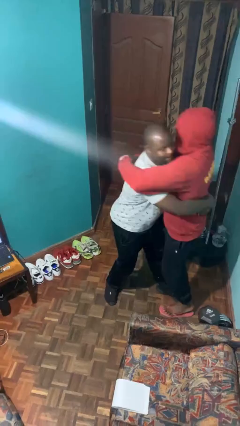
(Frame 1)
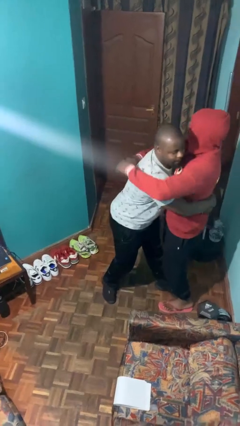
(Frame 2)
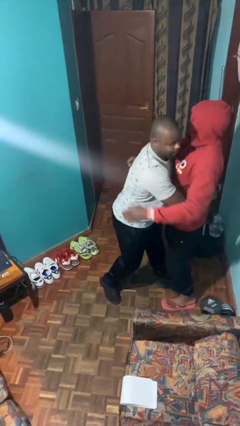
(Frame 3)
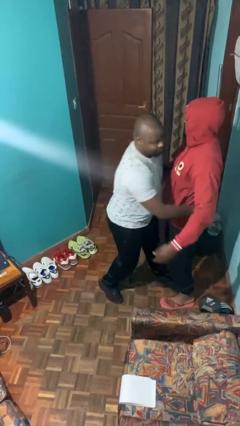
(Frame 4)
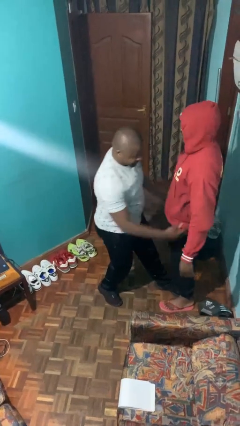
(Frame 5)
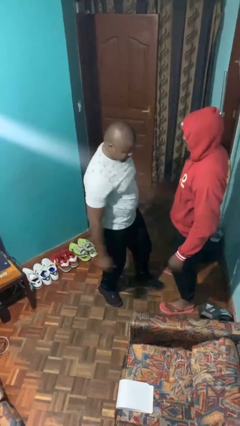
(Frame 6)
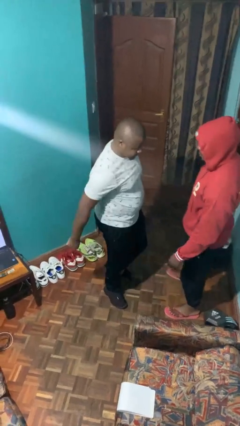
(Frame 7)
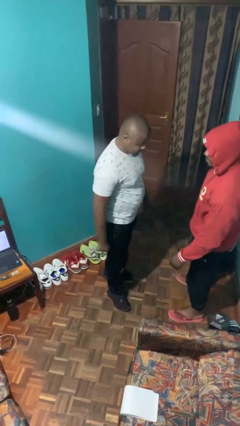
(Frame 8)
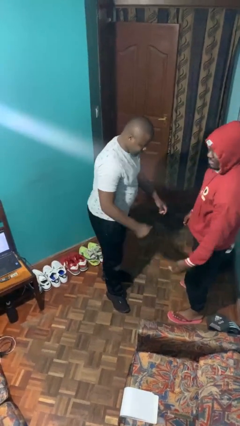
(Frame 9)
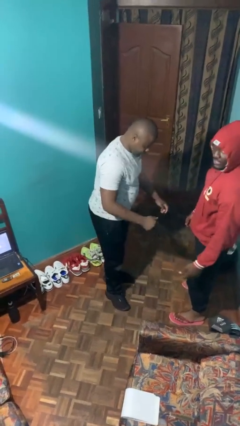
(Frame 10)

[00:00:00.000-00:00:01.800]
person puts down person

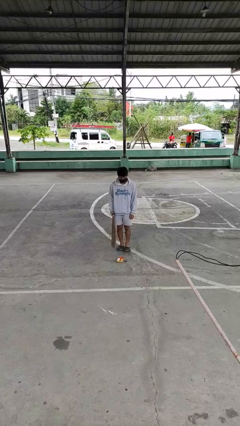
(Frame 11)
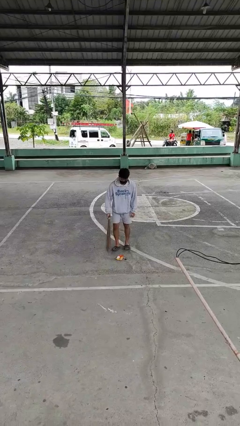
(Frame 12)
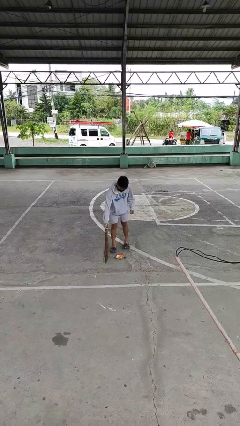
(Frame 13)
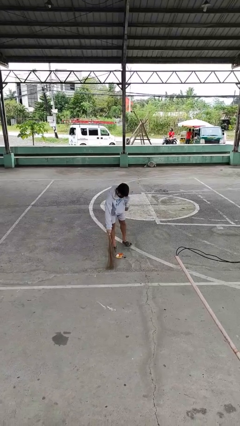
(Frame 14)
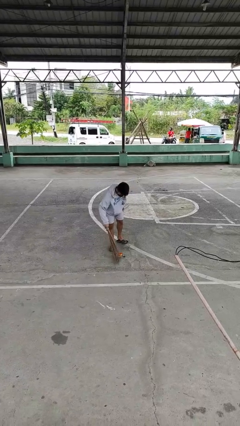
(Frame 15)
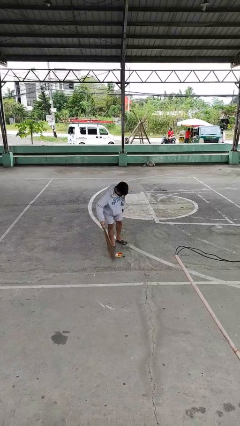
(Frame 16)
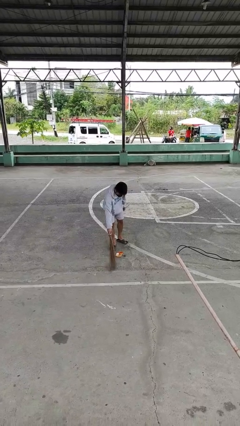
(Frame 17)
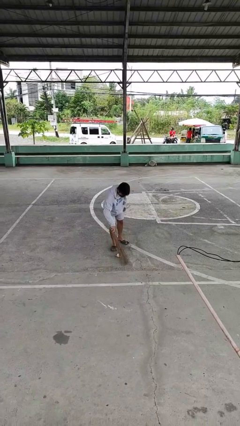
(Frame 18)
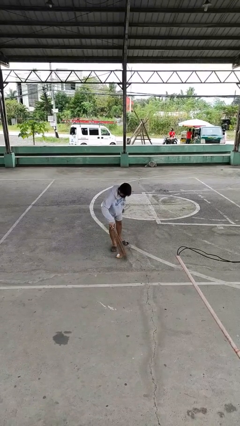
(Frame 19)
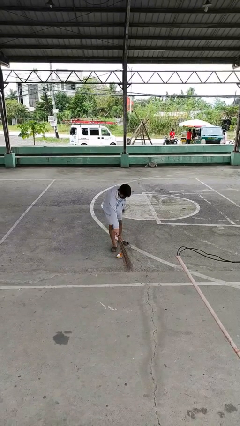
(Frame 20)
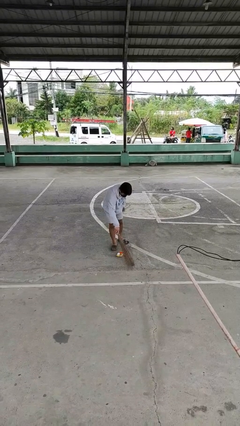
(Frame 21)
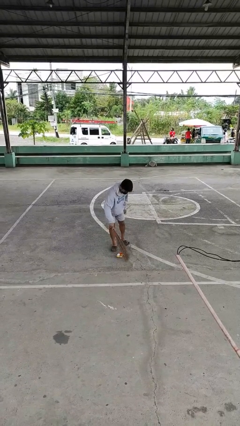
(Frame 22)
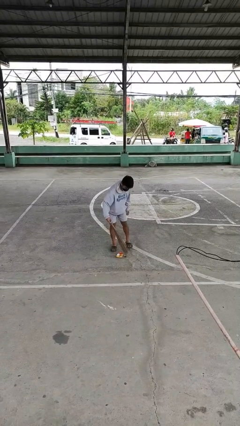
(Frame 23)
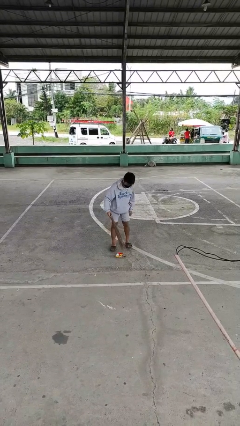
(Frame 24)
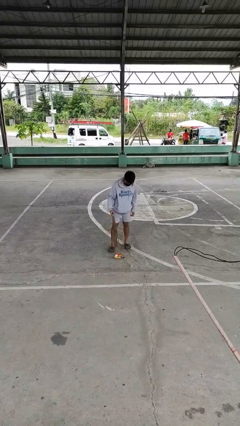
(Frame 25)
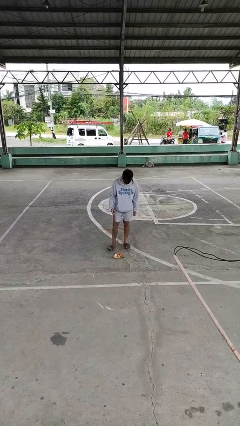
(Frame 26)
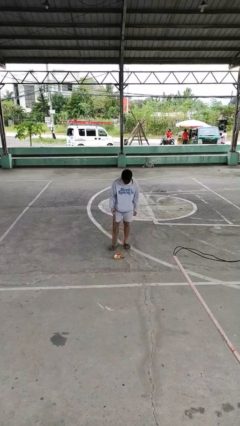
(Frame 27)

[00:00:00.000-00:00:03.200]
person sweeps floor

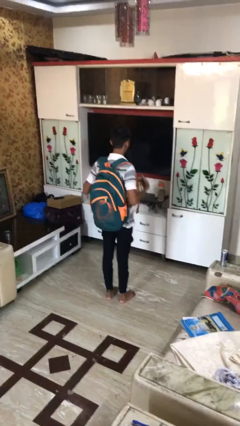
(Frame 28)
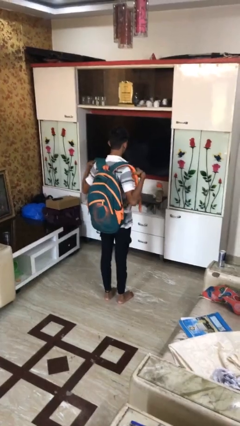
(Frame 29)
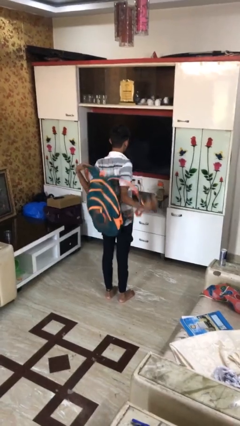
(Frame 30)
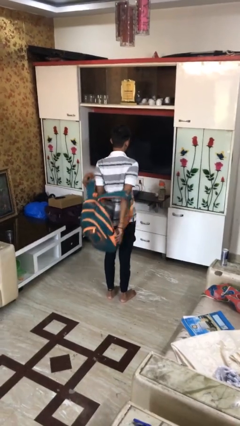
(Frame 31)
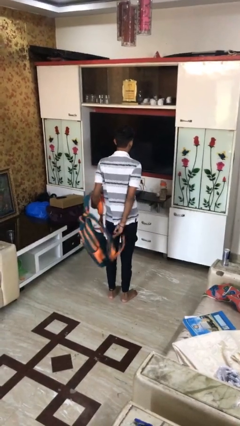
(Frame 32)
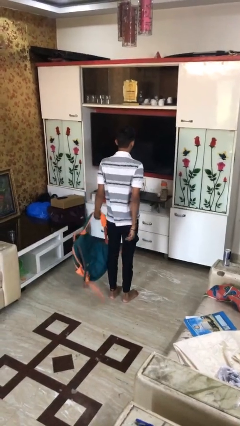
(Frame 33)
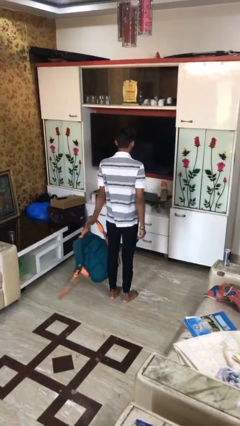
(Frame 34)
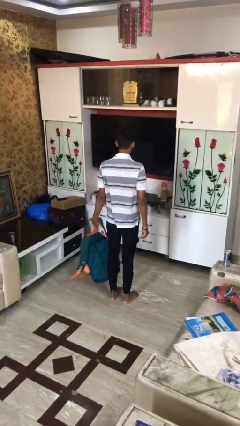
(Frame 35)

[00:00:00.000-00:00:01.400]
person takes off backpack

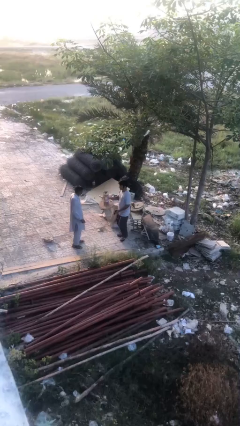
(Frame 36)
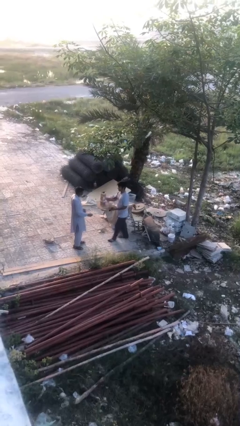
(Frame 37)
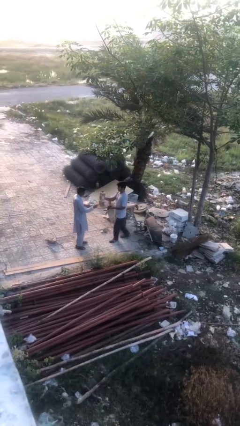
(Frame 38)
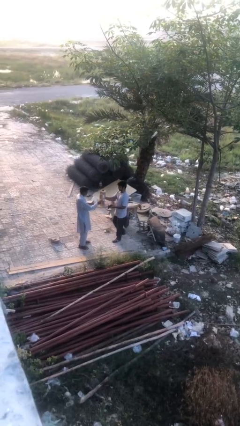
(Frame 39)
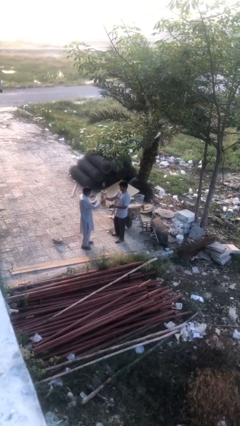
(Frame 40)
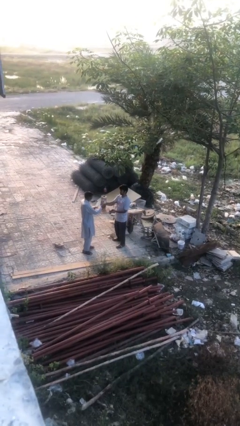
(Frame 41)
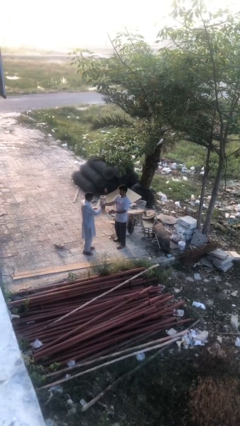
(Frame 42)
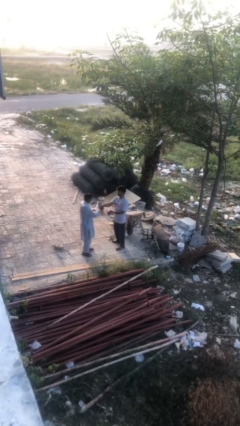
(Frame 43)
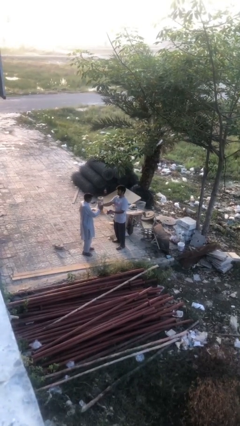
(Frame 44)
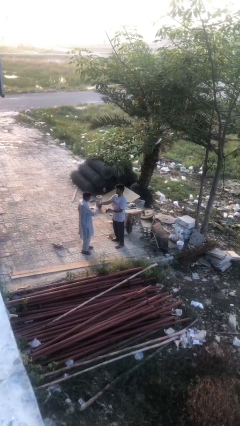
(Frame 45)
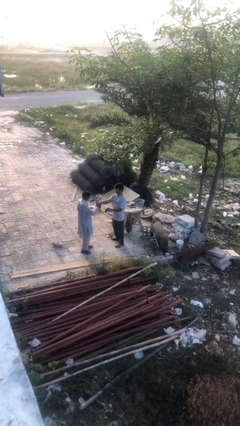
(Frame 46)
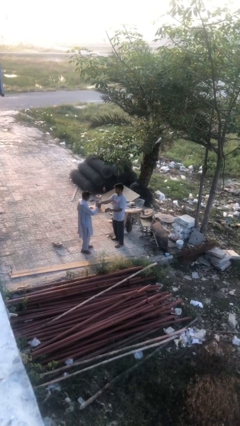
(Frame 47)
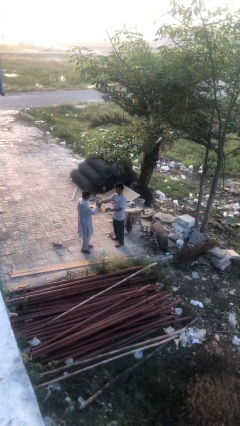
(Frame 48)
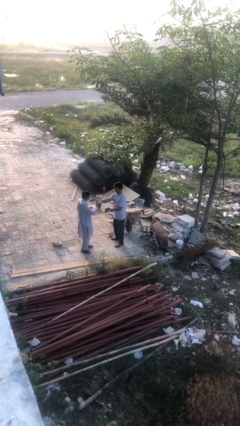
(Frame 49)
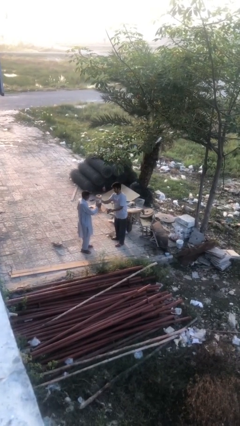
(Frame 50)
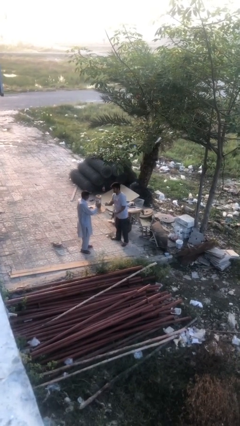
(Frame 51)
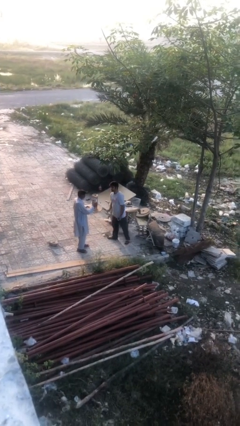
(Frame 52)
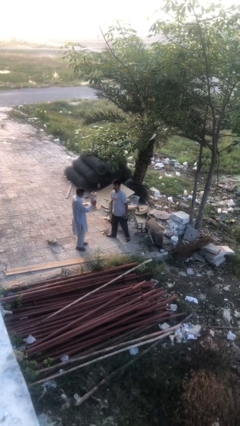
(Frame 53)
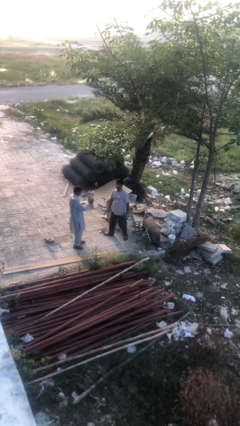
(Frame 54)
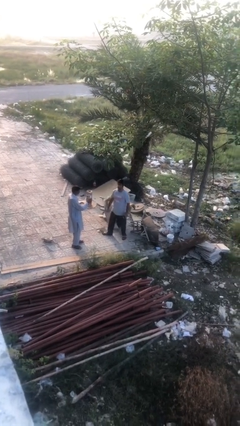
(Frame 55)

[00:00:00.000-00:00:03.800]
person transfers object to person

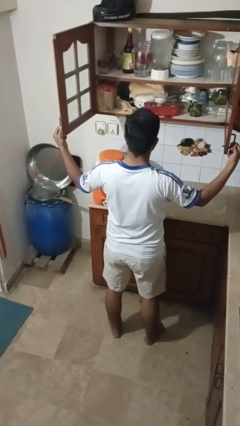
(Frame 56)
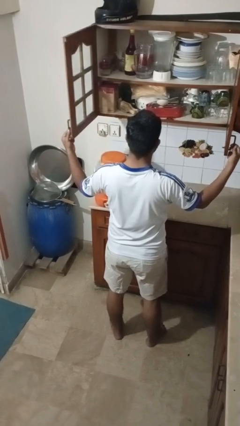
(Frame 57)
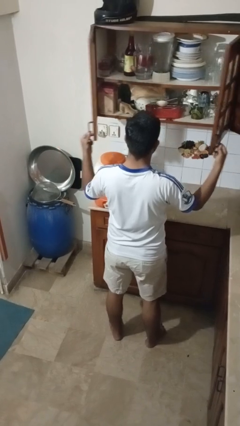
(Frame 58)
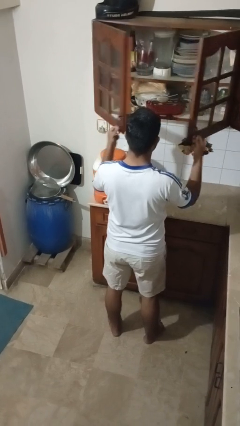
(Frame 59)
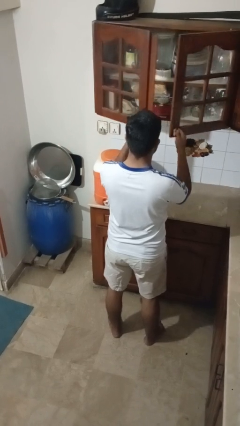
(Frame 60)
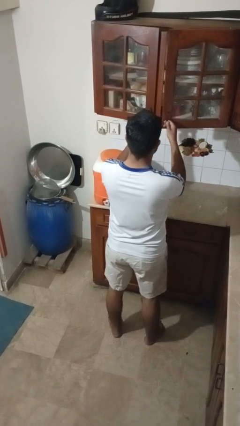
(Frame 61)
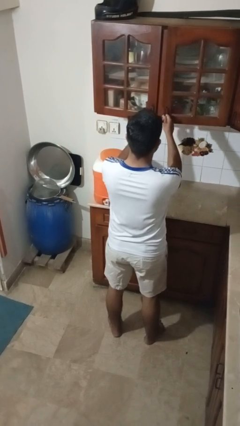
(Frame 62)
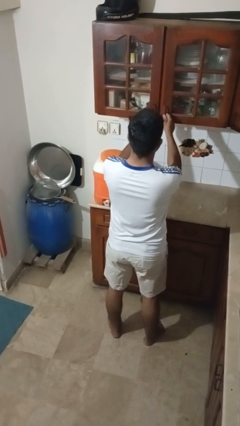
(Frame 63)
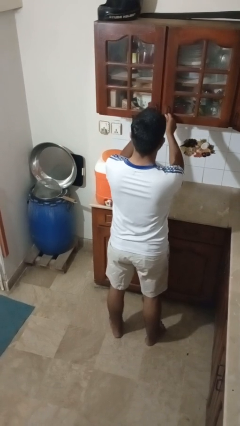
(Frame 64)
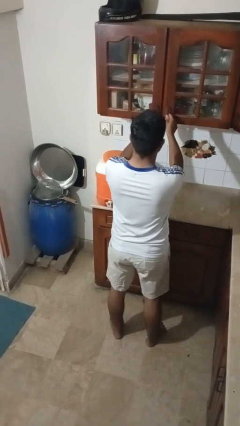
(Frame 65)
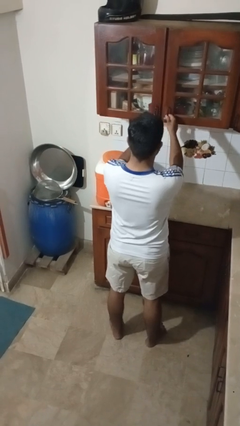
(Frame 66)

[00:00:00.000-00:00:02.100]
person closes cabinet

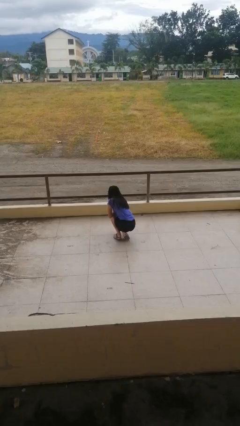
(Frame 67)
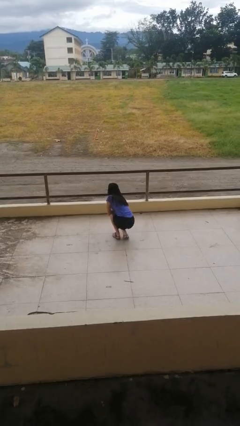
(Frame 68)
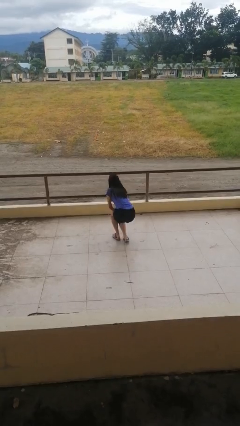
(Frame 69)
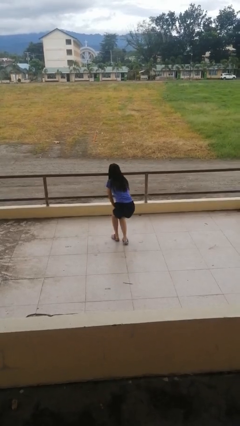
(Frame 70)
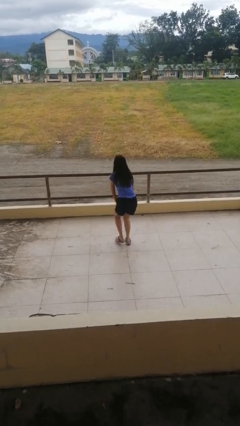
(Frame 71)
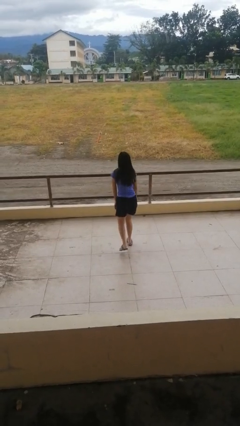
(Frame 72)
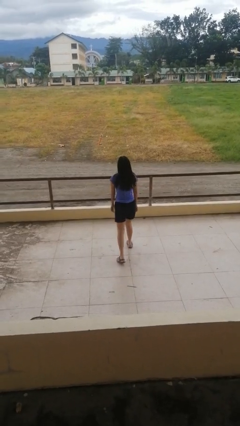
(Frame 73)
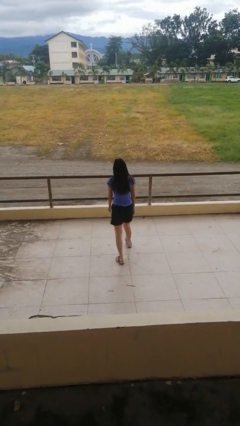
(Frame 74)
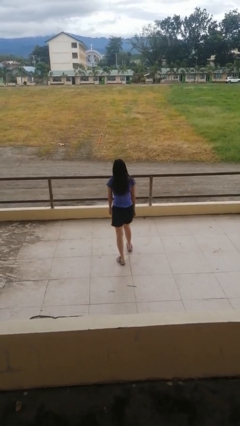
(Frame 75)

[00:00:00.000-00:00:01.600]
person stands up from floor

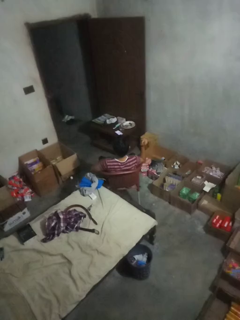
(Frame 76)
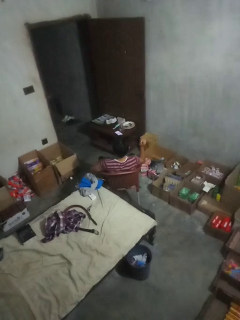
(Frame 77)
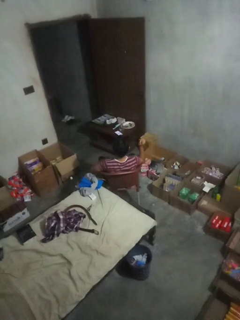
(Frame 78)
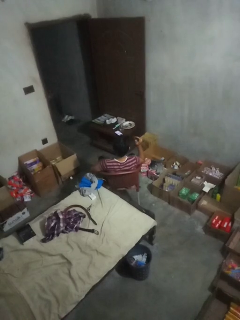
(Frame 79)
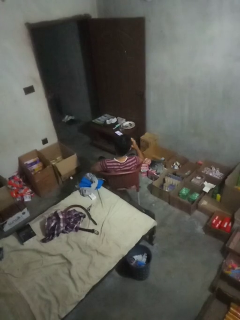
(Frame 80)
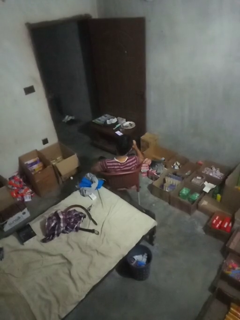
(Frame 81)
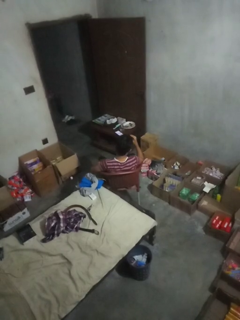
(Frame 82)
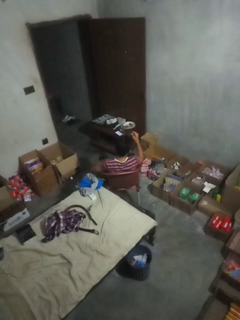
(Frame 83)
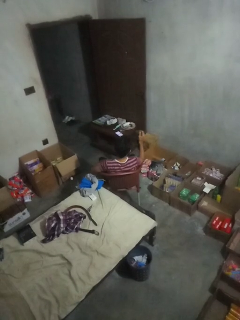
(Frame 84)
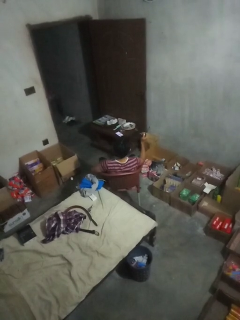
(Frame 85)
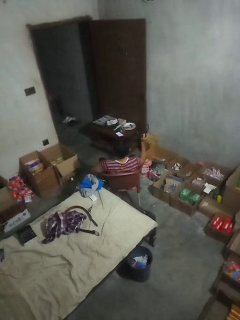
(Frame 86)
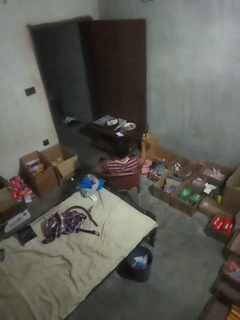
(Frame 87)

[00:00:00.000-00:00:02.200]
person takes off sunglasses

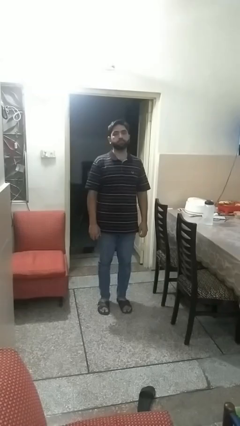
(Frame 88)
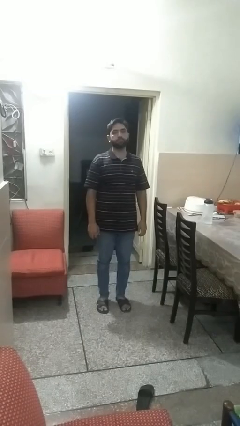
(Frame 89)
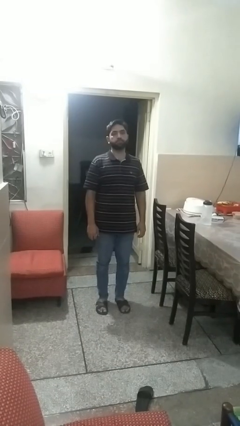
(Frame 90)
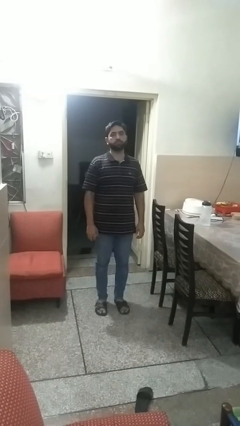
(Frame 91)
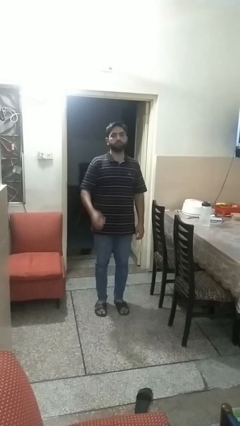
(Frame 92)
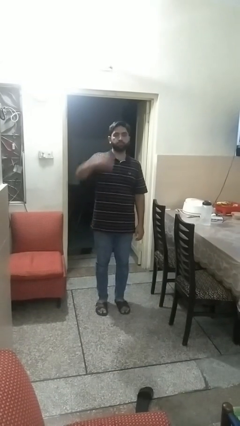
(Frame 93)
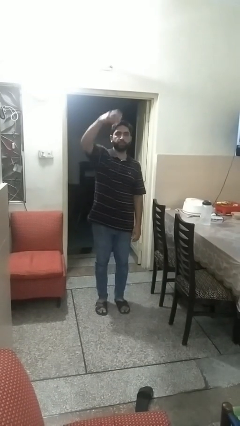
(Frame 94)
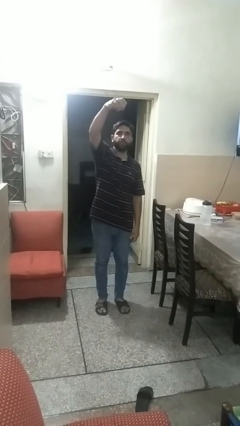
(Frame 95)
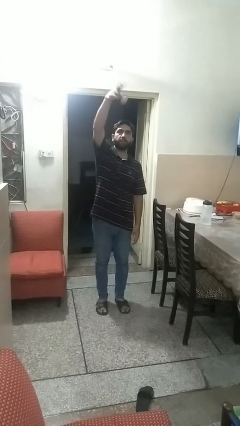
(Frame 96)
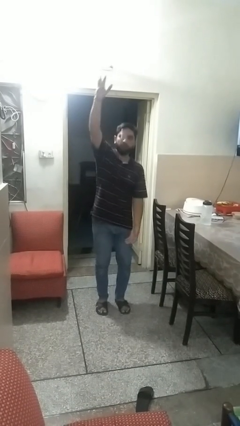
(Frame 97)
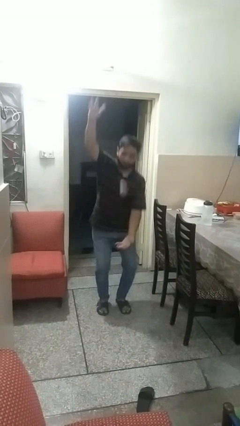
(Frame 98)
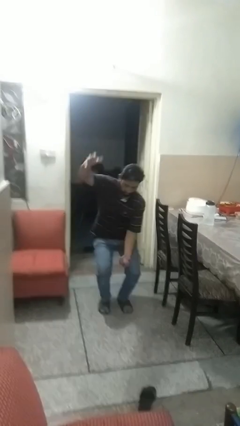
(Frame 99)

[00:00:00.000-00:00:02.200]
person drops object
